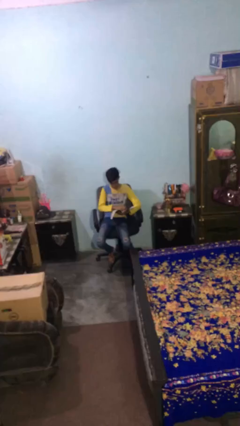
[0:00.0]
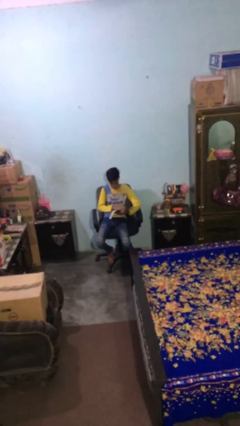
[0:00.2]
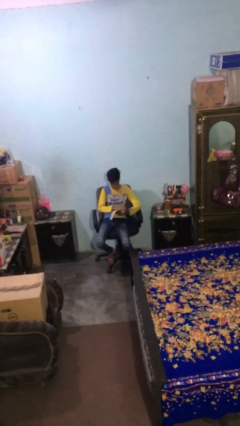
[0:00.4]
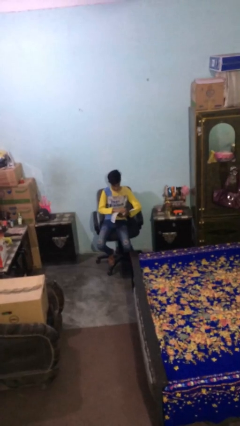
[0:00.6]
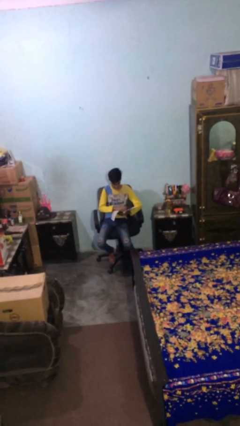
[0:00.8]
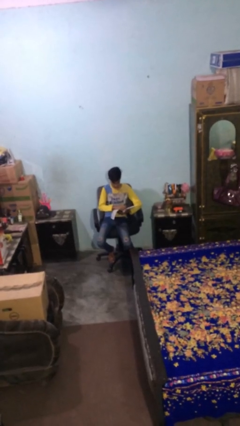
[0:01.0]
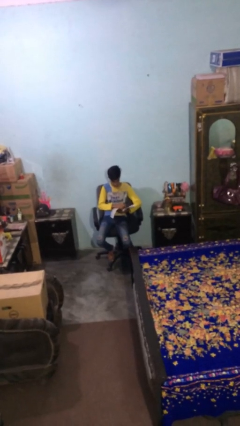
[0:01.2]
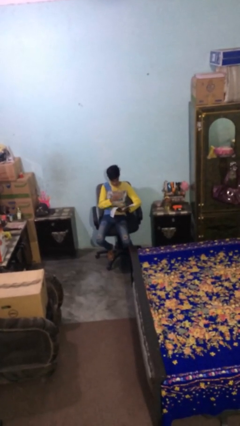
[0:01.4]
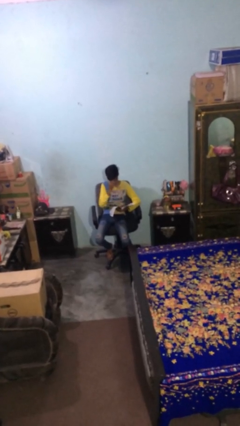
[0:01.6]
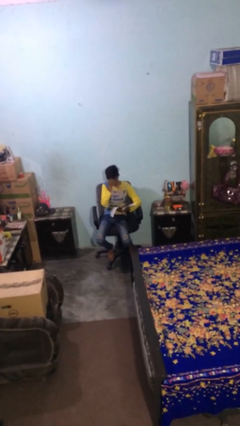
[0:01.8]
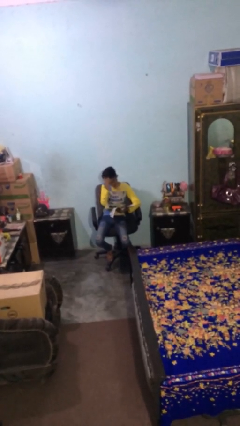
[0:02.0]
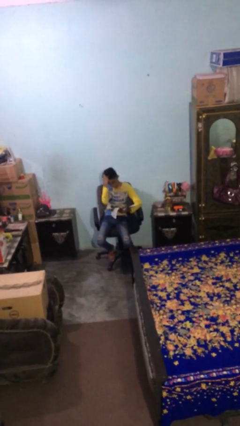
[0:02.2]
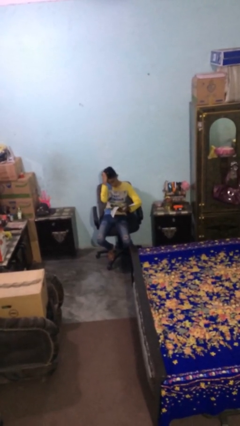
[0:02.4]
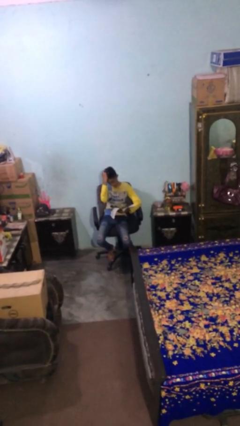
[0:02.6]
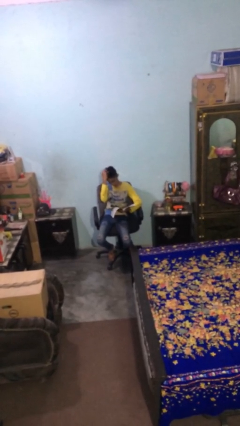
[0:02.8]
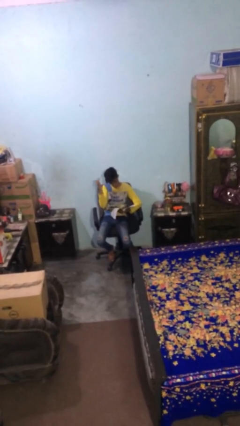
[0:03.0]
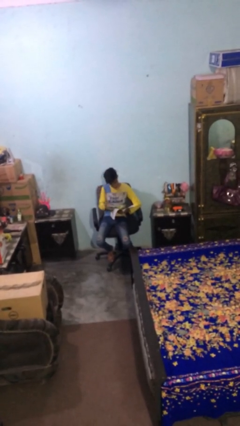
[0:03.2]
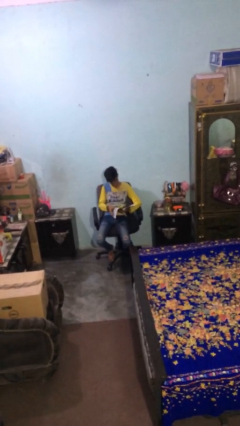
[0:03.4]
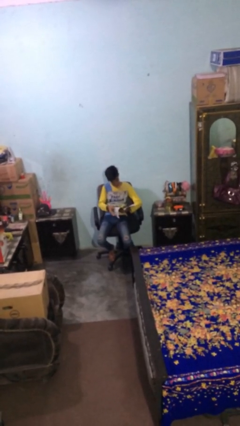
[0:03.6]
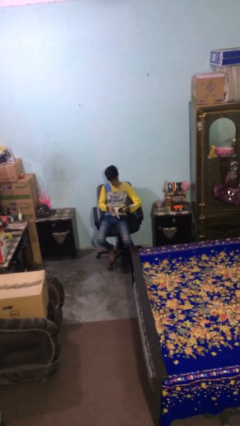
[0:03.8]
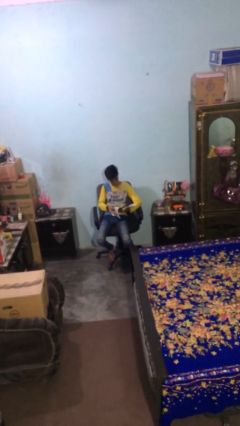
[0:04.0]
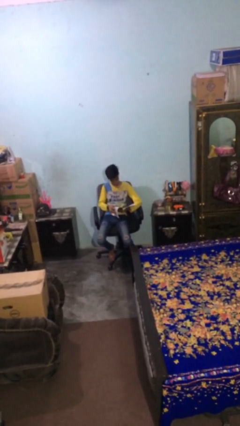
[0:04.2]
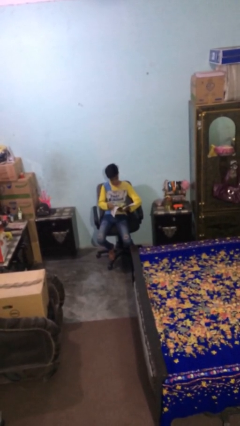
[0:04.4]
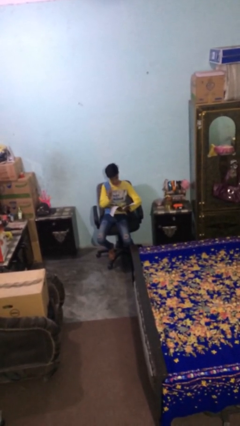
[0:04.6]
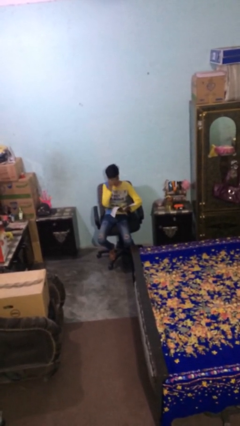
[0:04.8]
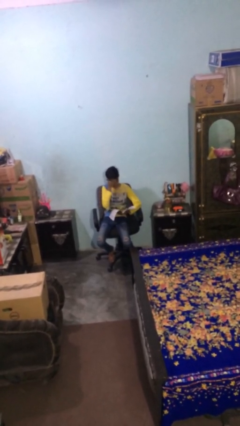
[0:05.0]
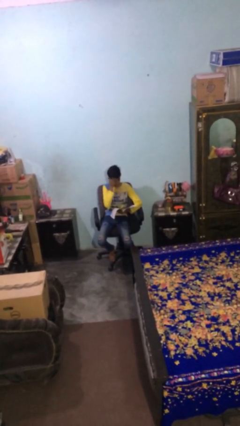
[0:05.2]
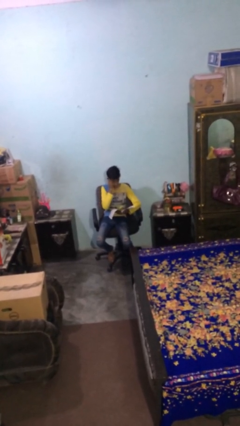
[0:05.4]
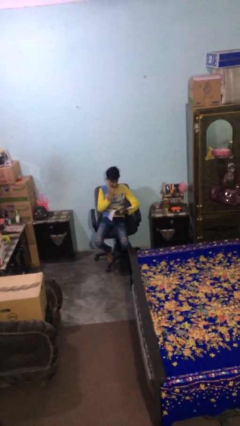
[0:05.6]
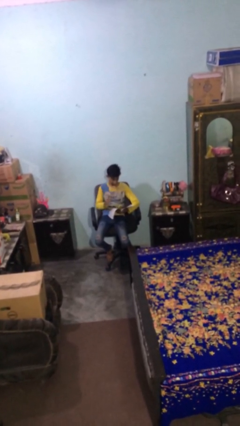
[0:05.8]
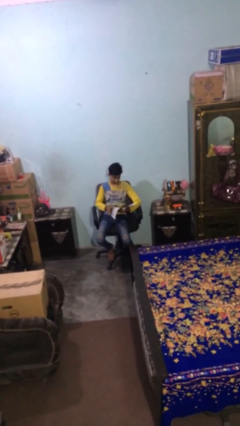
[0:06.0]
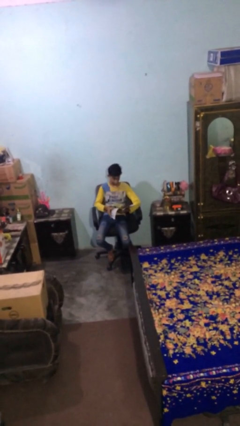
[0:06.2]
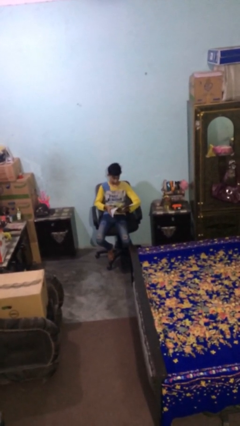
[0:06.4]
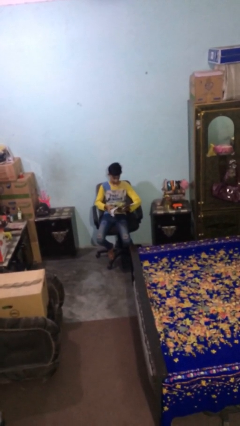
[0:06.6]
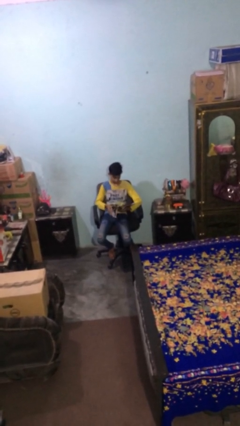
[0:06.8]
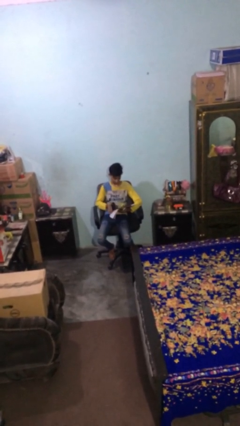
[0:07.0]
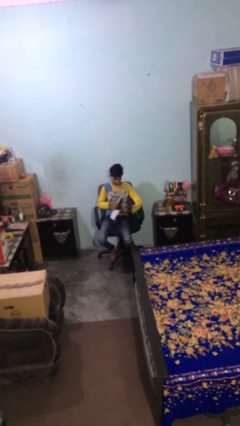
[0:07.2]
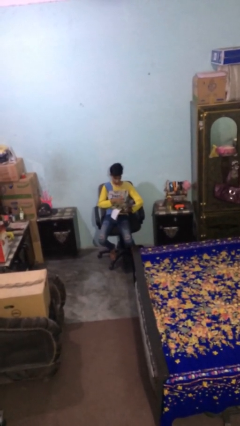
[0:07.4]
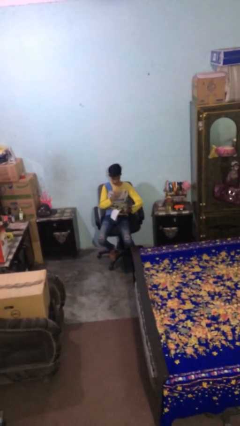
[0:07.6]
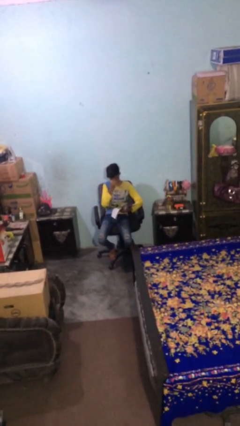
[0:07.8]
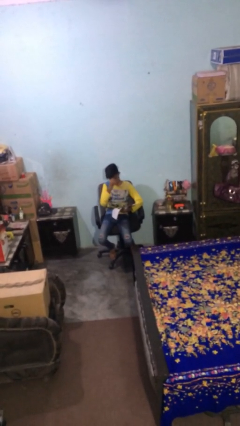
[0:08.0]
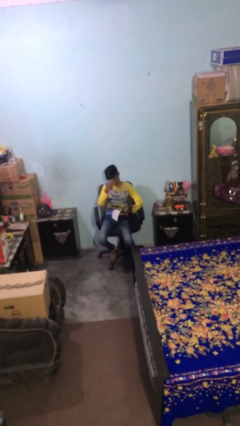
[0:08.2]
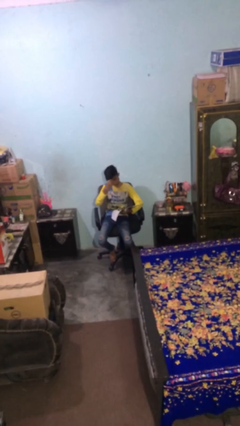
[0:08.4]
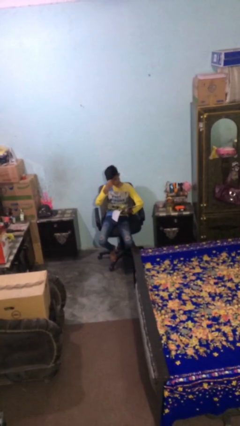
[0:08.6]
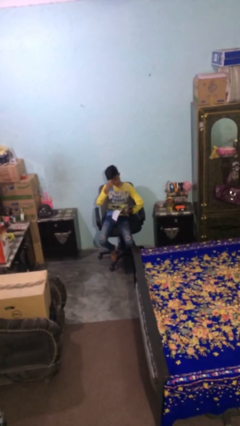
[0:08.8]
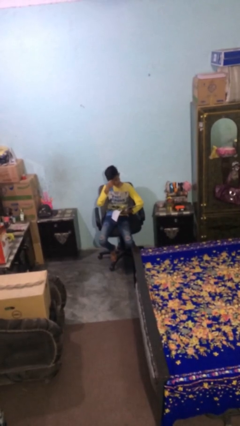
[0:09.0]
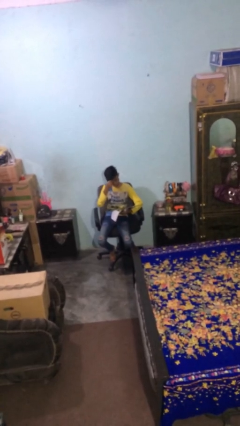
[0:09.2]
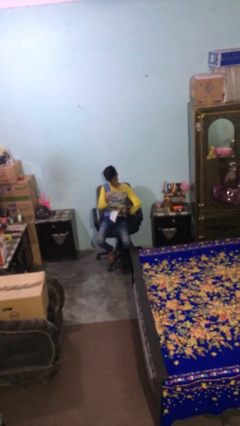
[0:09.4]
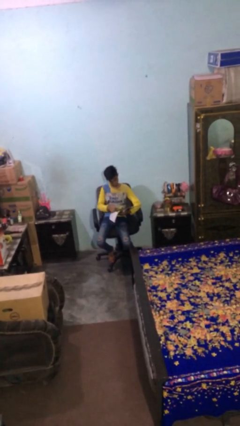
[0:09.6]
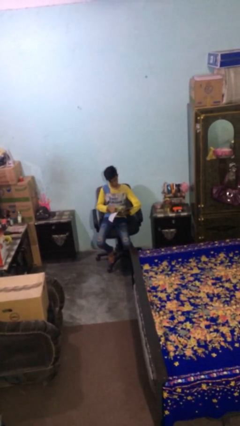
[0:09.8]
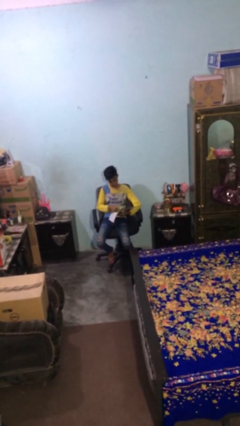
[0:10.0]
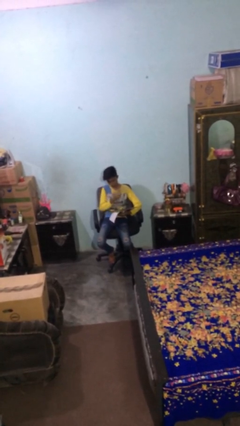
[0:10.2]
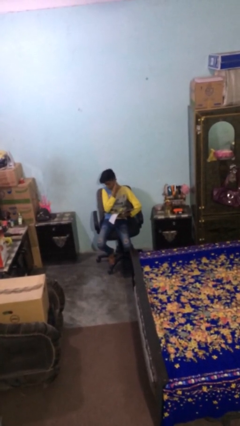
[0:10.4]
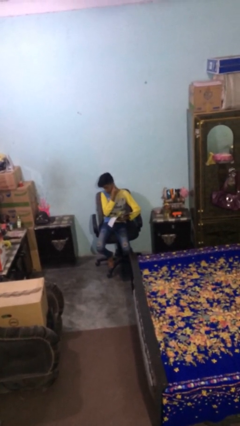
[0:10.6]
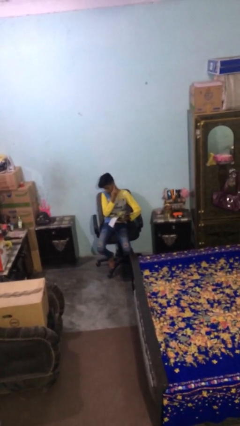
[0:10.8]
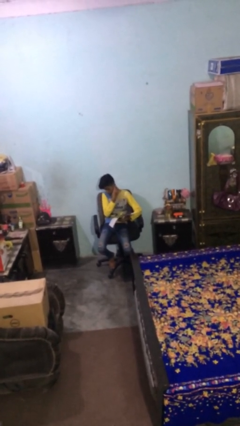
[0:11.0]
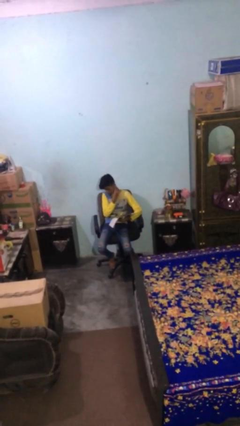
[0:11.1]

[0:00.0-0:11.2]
person reads document

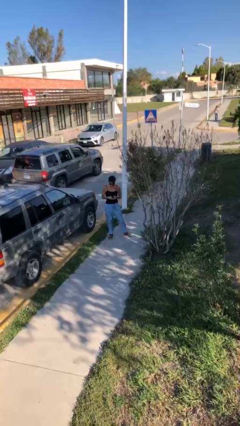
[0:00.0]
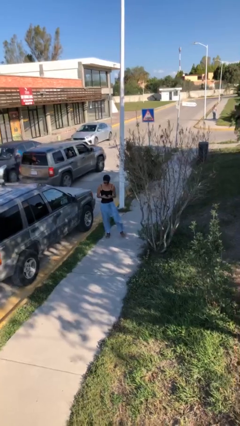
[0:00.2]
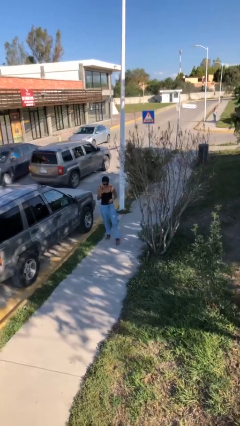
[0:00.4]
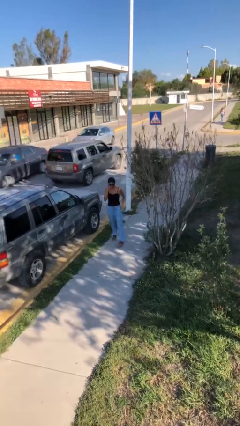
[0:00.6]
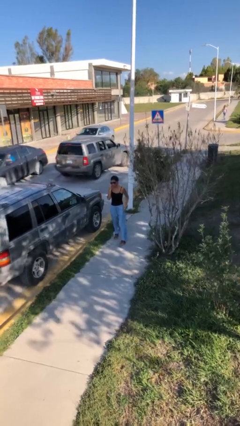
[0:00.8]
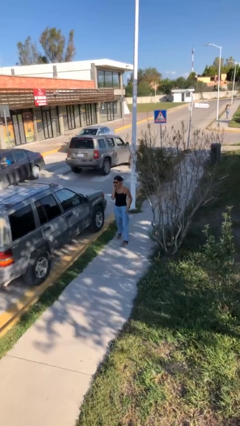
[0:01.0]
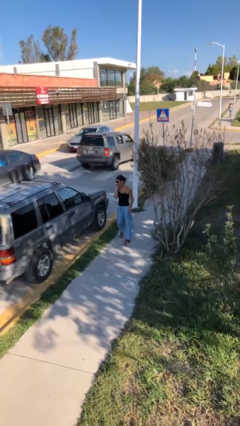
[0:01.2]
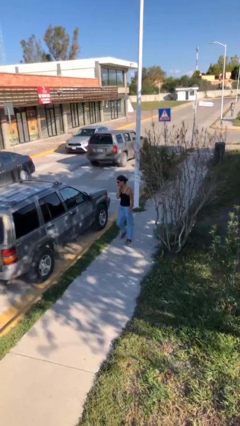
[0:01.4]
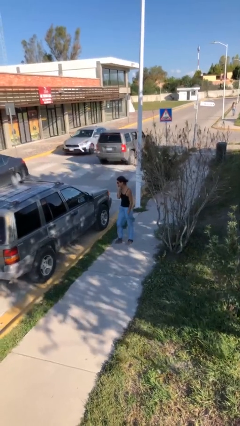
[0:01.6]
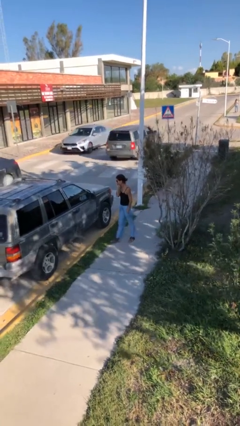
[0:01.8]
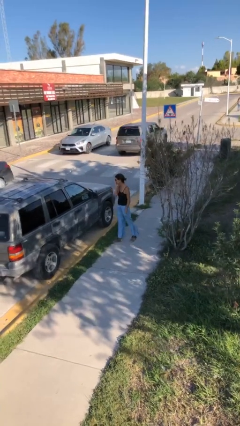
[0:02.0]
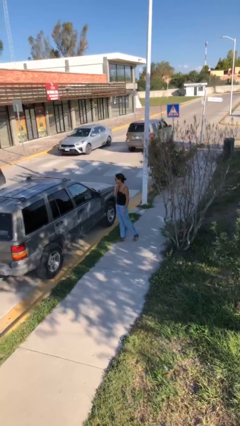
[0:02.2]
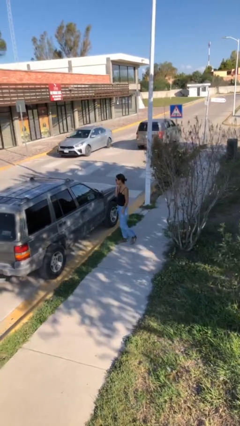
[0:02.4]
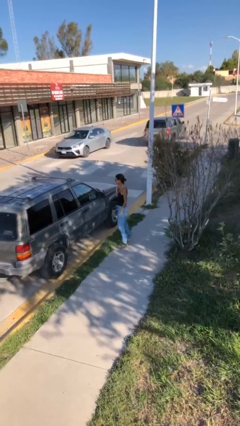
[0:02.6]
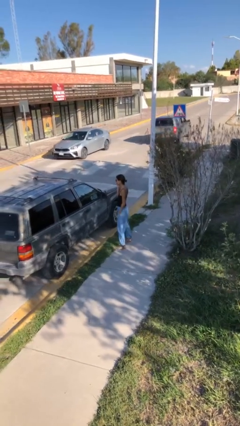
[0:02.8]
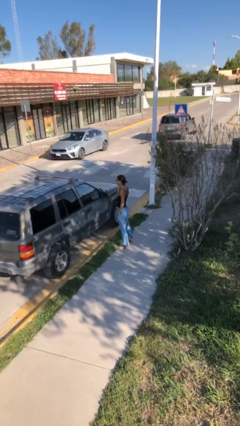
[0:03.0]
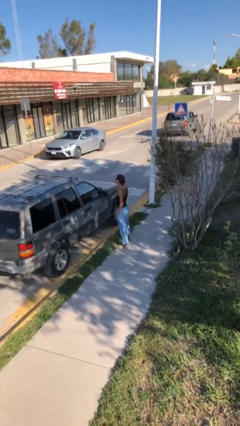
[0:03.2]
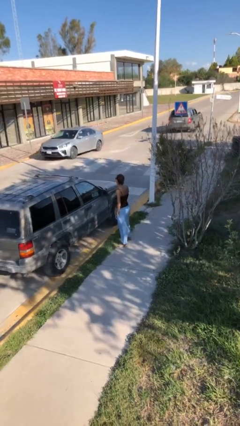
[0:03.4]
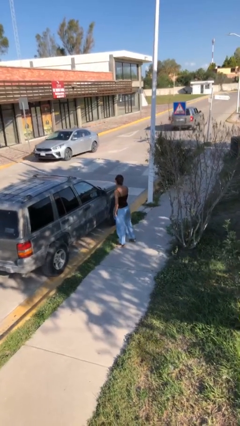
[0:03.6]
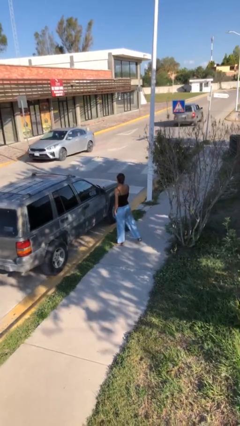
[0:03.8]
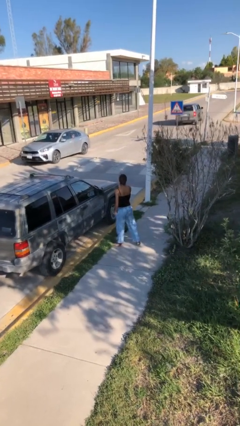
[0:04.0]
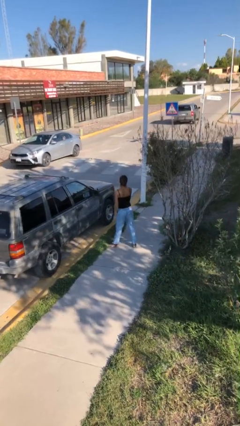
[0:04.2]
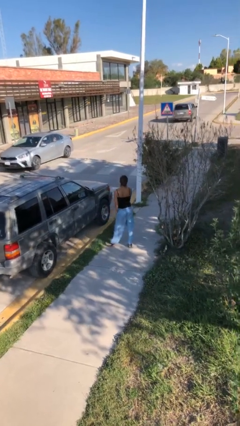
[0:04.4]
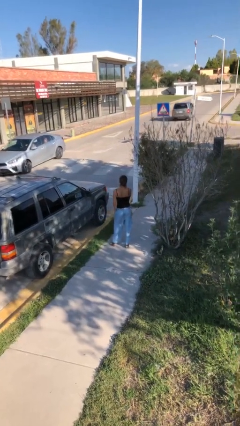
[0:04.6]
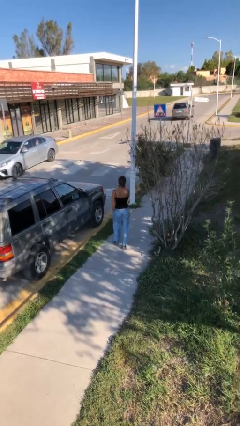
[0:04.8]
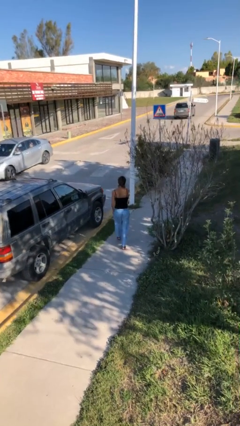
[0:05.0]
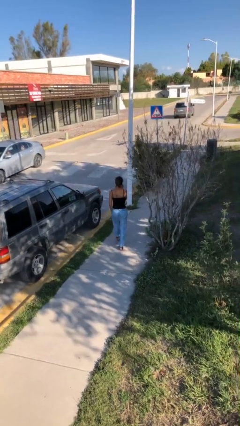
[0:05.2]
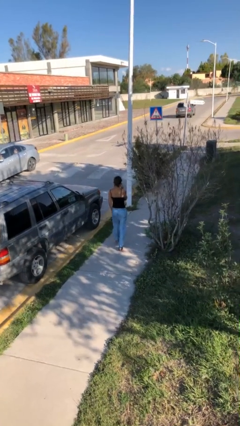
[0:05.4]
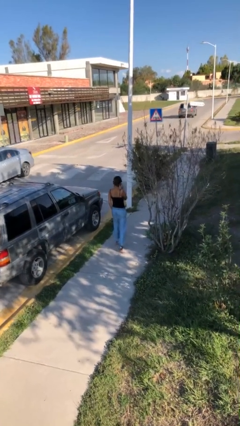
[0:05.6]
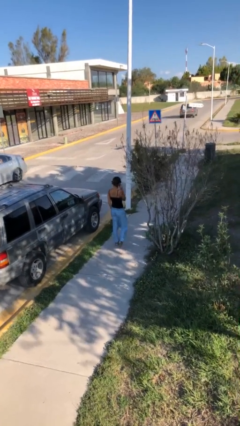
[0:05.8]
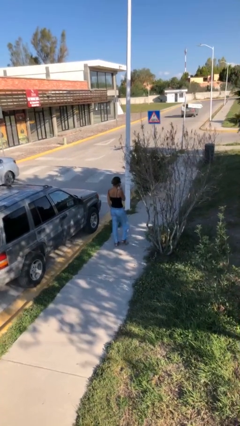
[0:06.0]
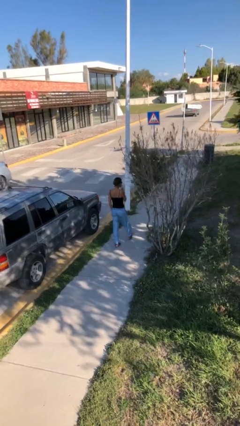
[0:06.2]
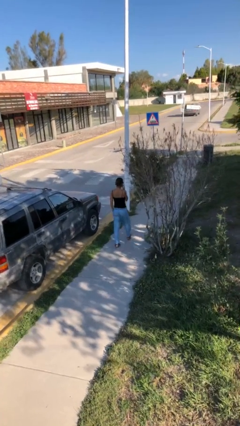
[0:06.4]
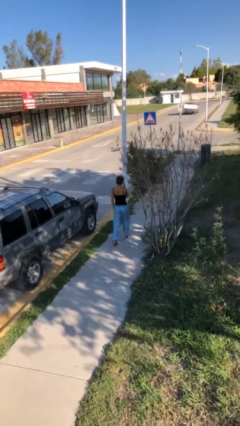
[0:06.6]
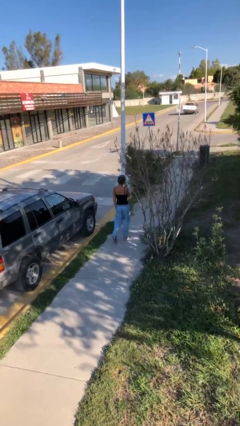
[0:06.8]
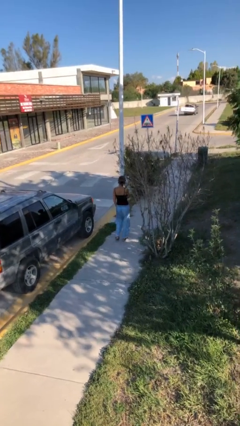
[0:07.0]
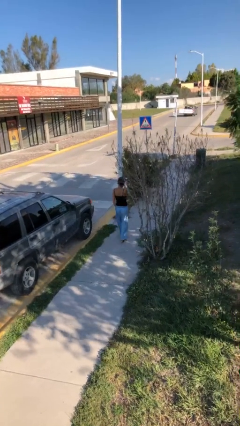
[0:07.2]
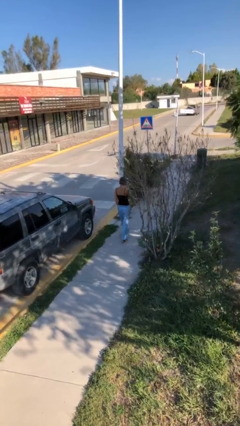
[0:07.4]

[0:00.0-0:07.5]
person talks on phone
